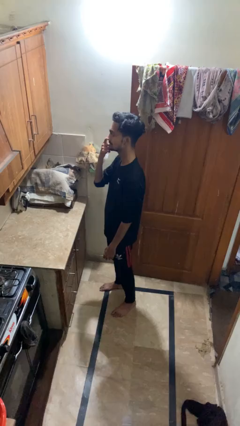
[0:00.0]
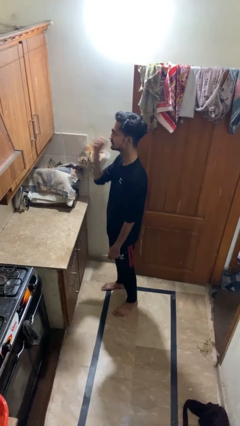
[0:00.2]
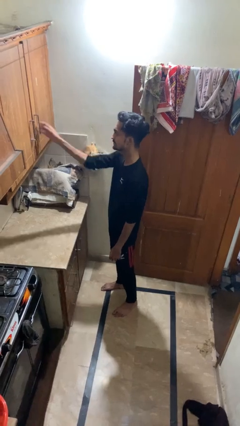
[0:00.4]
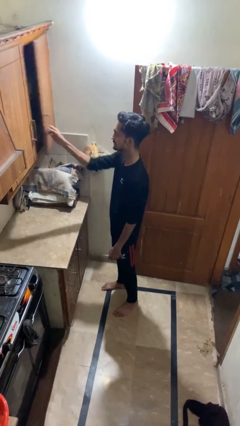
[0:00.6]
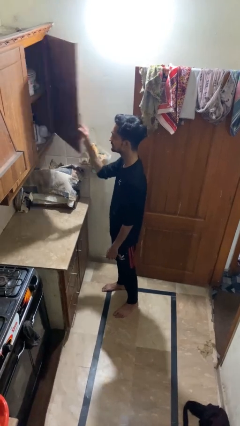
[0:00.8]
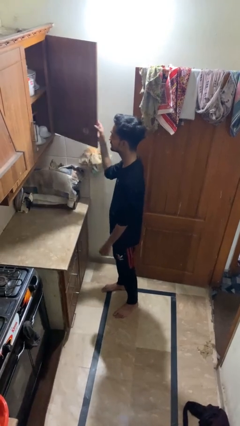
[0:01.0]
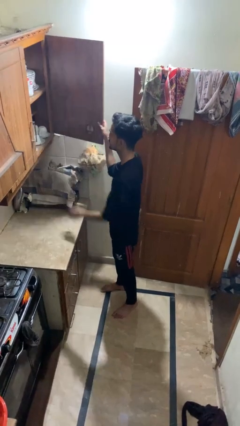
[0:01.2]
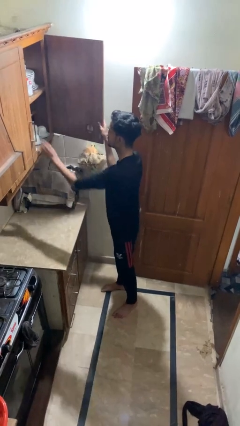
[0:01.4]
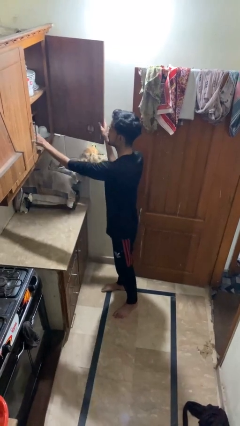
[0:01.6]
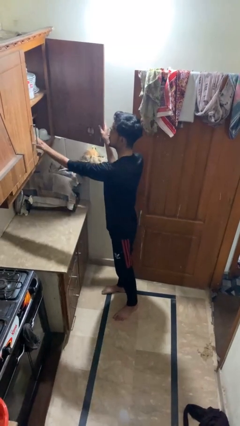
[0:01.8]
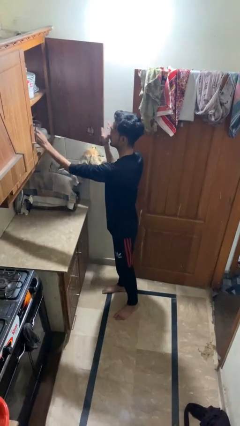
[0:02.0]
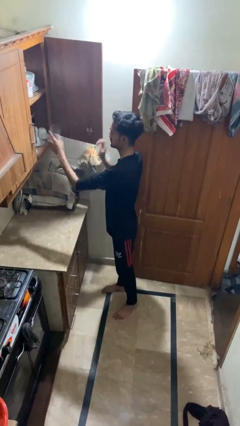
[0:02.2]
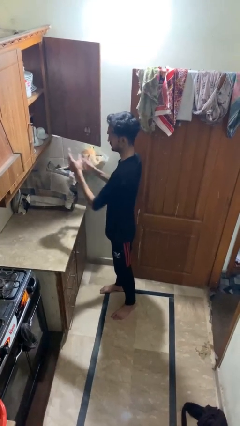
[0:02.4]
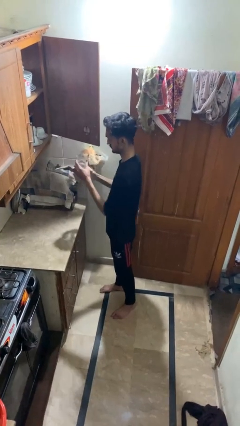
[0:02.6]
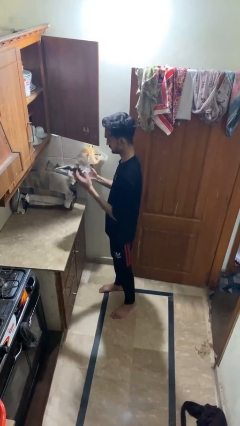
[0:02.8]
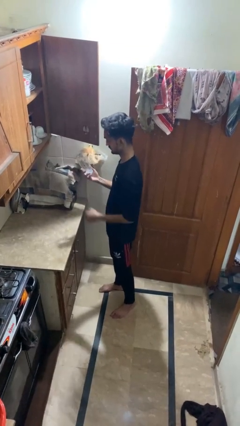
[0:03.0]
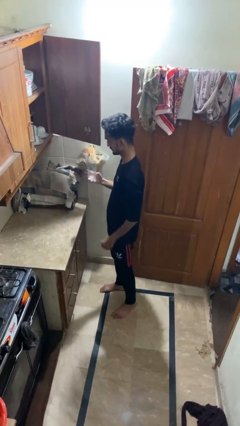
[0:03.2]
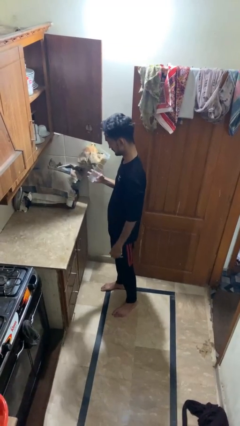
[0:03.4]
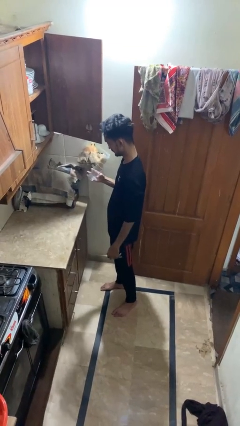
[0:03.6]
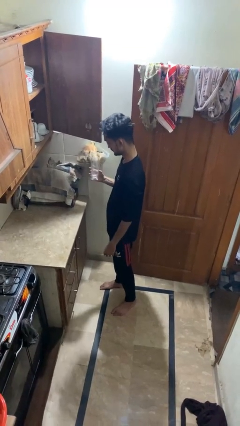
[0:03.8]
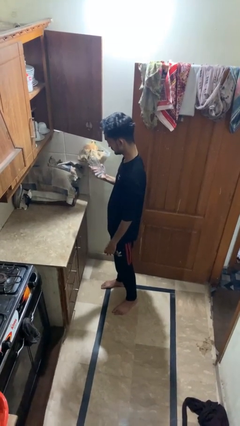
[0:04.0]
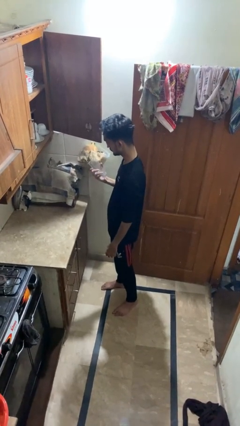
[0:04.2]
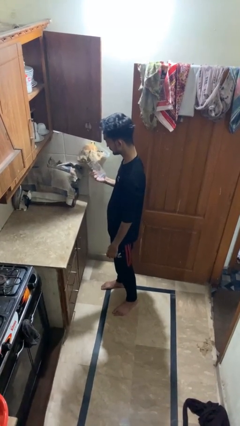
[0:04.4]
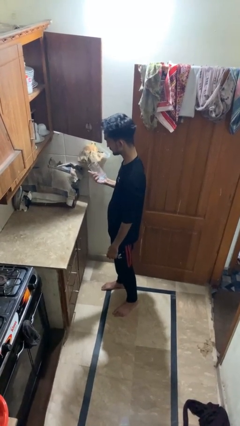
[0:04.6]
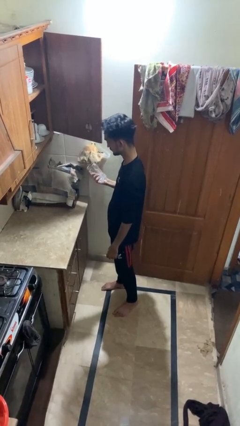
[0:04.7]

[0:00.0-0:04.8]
person puts object in cabinet

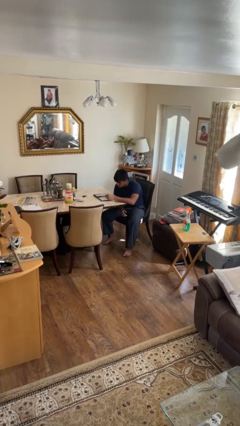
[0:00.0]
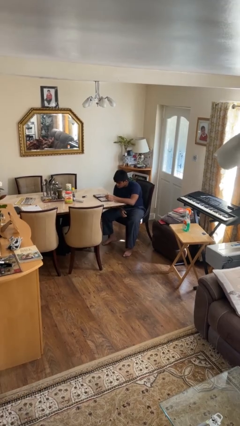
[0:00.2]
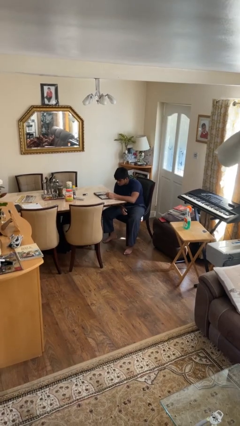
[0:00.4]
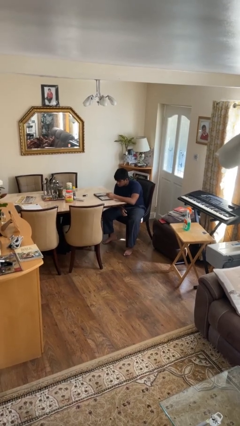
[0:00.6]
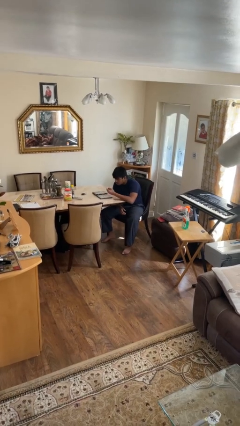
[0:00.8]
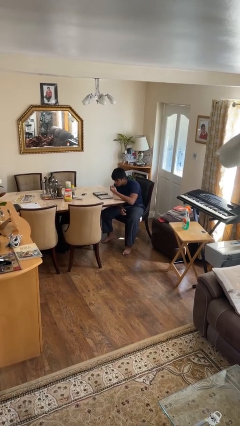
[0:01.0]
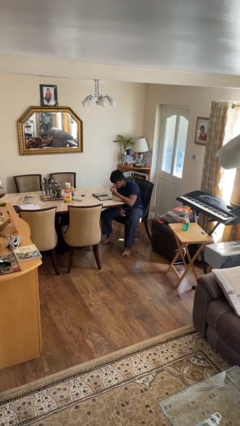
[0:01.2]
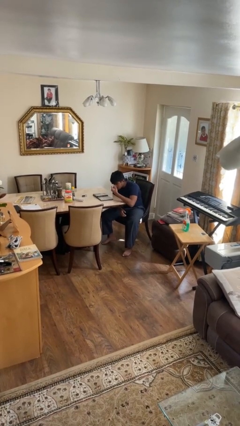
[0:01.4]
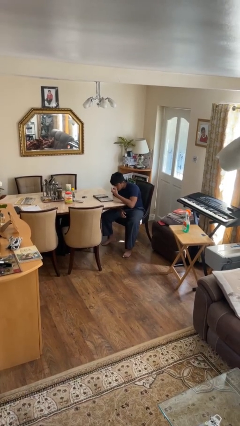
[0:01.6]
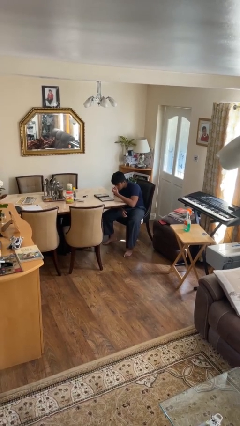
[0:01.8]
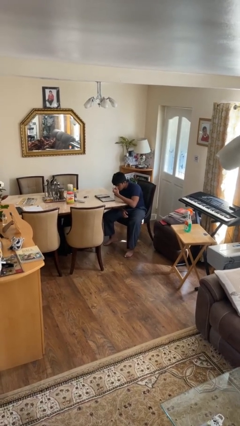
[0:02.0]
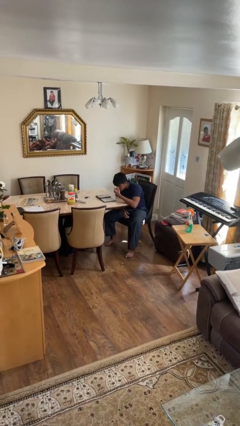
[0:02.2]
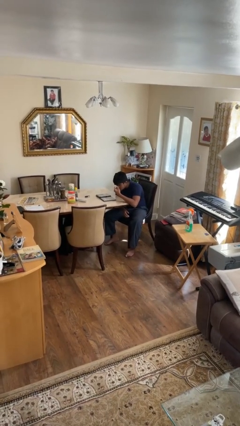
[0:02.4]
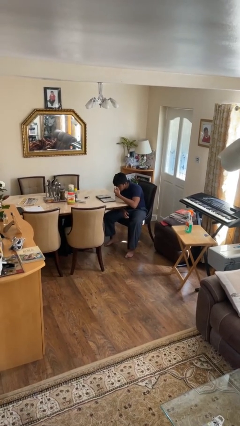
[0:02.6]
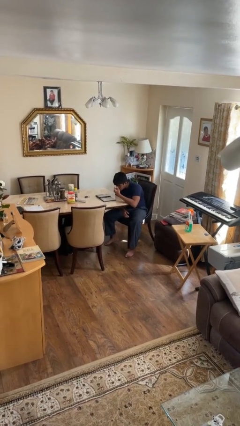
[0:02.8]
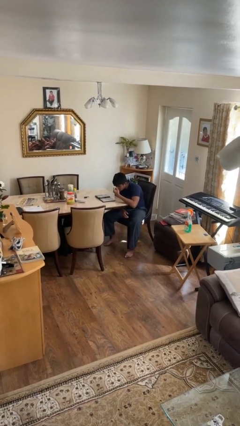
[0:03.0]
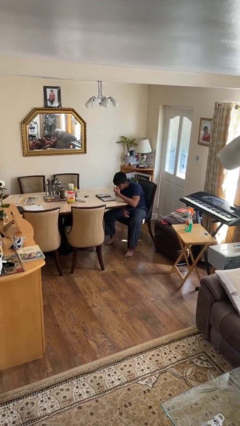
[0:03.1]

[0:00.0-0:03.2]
person applies eye makeup

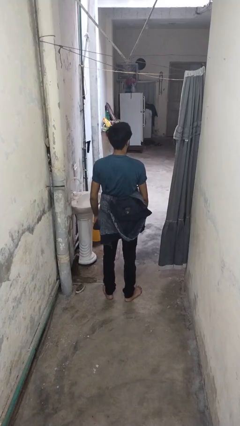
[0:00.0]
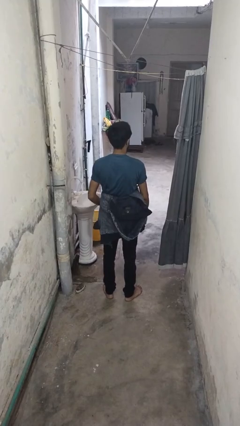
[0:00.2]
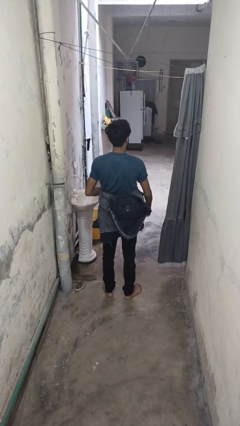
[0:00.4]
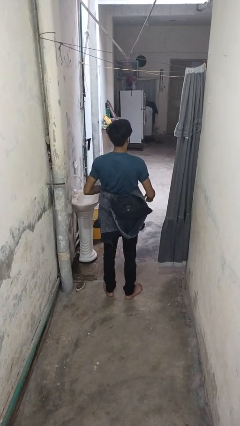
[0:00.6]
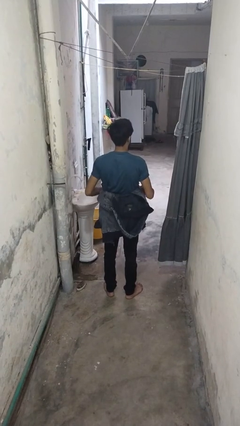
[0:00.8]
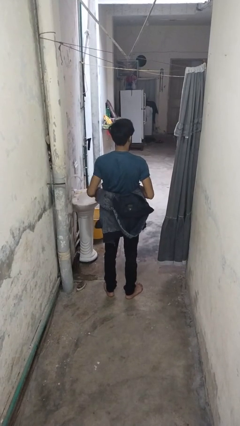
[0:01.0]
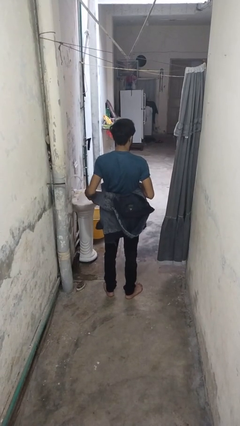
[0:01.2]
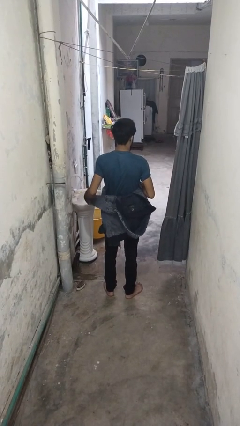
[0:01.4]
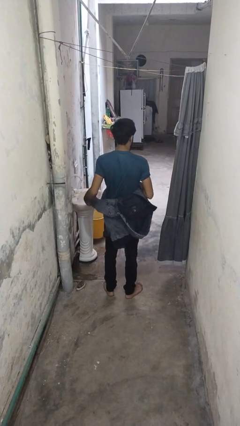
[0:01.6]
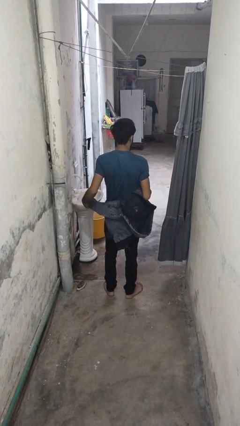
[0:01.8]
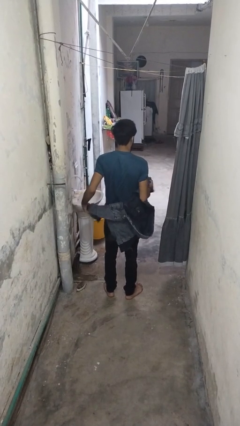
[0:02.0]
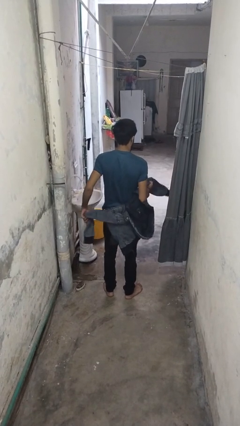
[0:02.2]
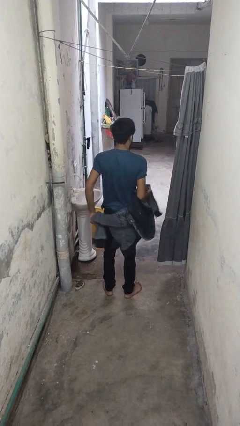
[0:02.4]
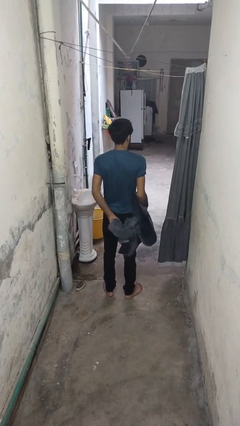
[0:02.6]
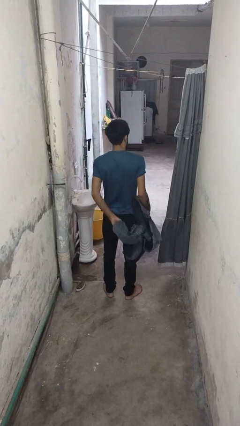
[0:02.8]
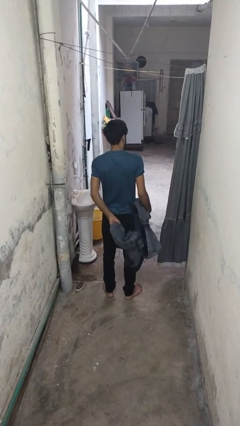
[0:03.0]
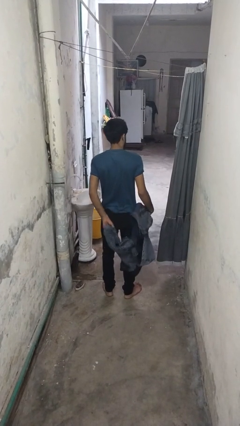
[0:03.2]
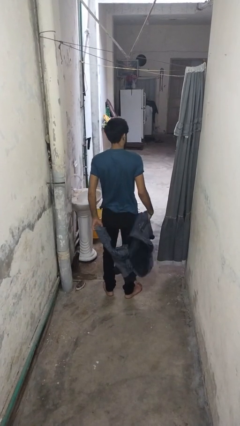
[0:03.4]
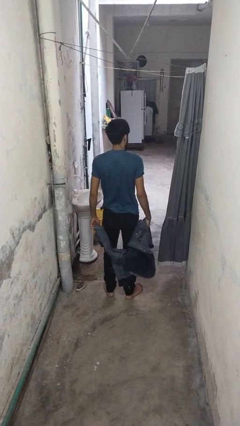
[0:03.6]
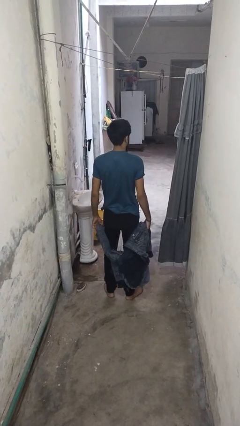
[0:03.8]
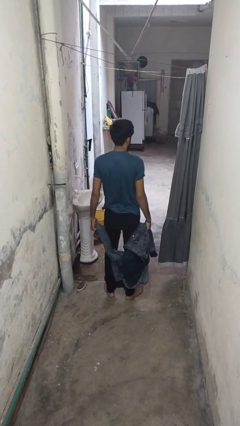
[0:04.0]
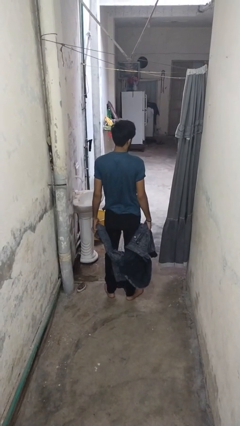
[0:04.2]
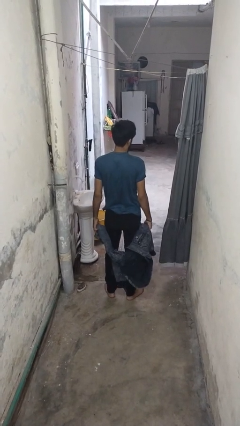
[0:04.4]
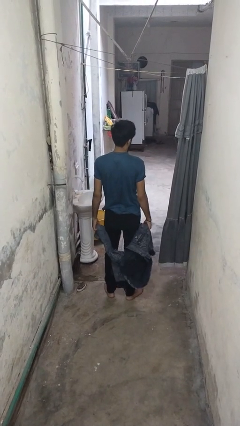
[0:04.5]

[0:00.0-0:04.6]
person unties jacket around waist

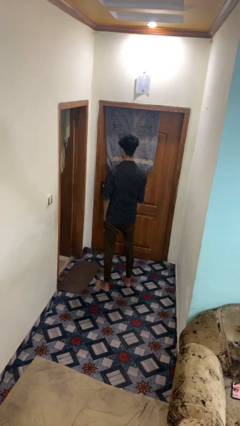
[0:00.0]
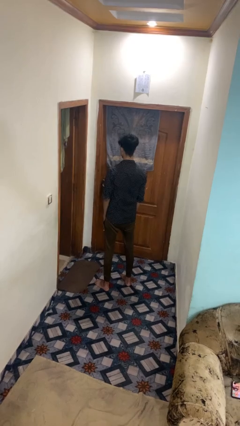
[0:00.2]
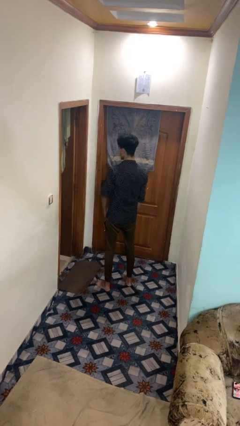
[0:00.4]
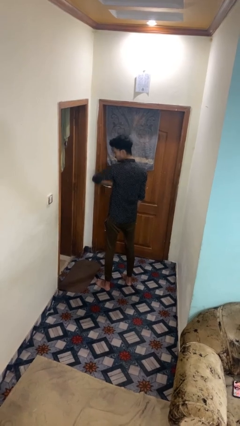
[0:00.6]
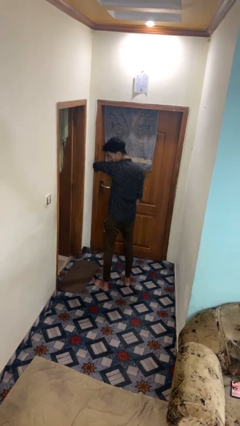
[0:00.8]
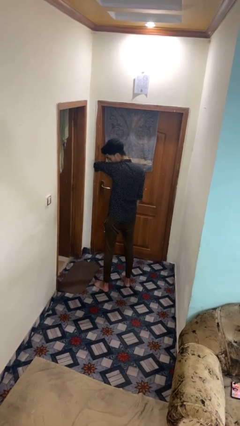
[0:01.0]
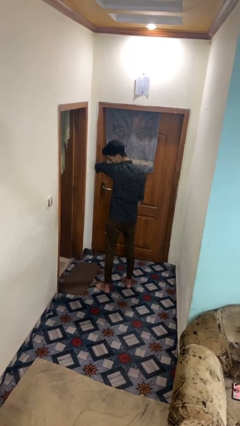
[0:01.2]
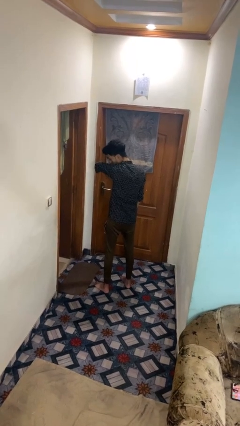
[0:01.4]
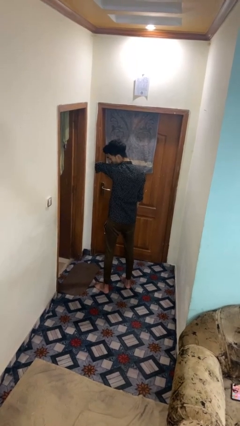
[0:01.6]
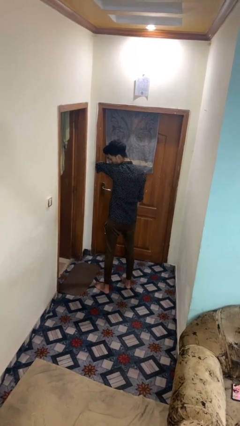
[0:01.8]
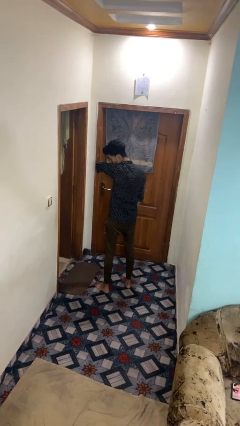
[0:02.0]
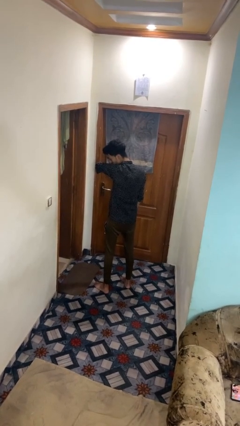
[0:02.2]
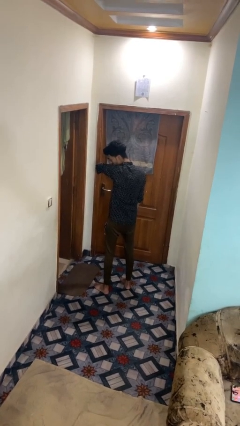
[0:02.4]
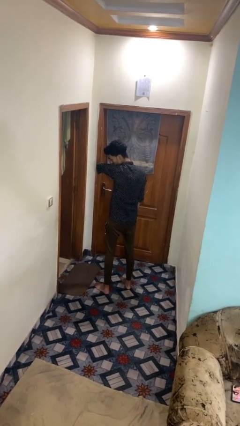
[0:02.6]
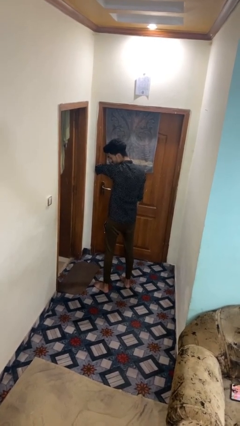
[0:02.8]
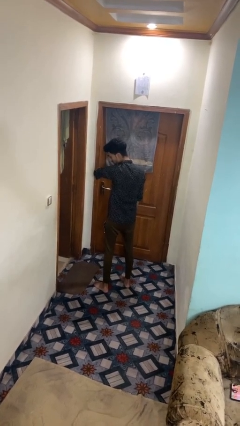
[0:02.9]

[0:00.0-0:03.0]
person sneezes into arm

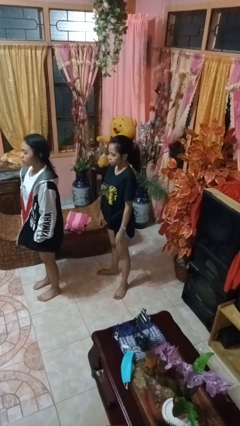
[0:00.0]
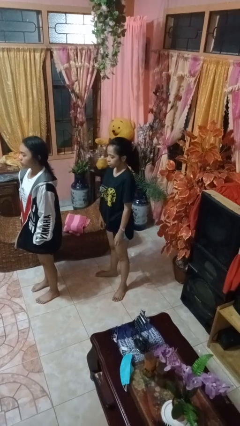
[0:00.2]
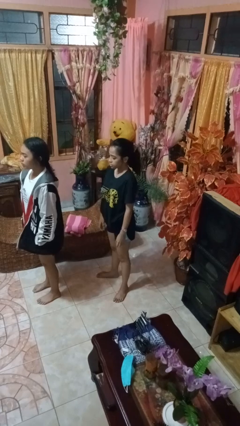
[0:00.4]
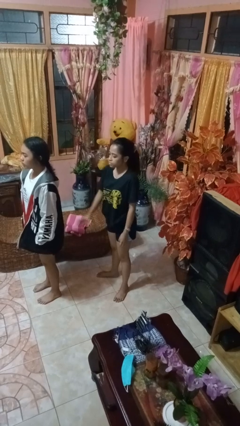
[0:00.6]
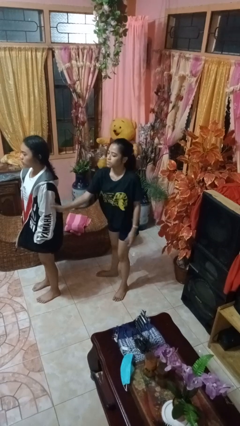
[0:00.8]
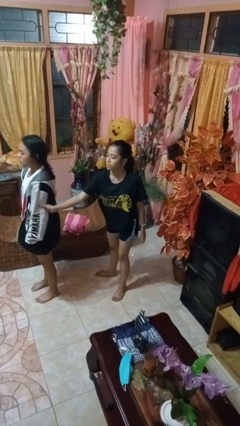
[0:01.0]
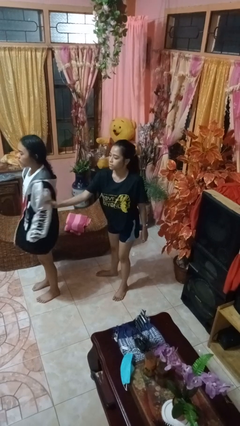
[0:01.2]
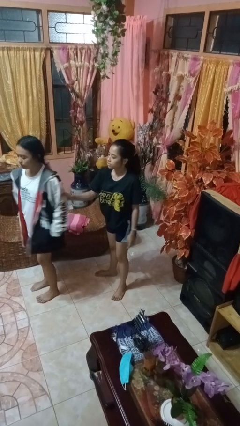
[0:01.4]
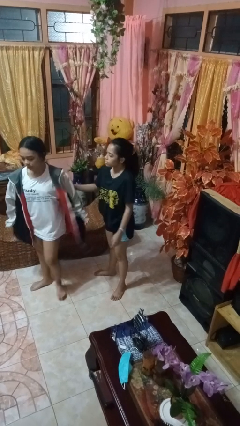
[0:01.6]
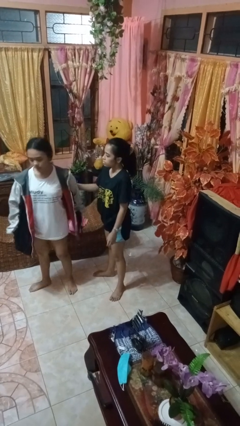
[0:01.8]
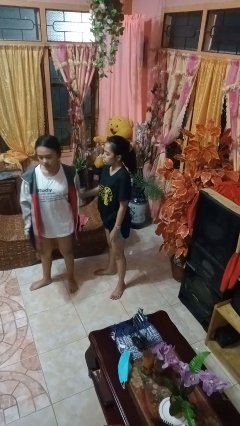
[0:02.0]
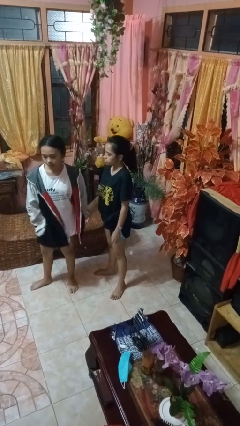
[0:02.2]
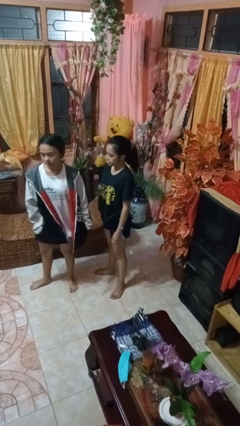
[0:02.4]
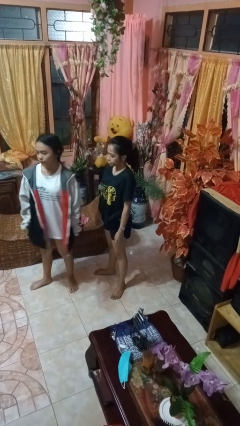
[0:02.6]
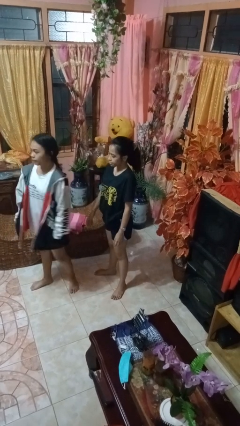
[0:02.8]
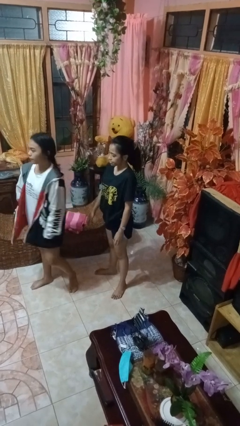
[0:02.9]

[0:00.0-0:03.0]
person grabs person by bicep
